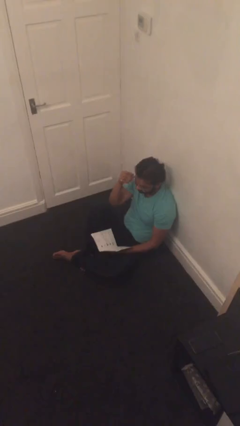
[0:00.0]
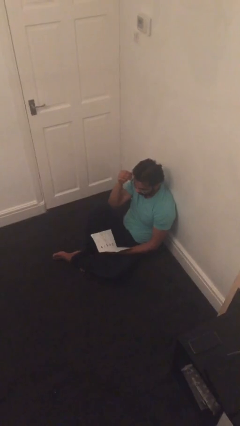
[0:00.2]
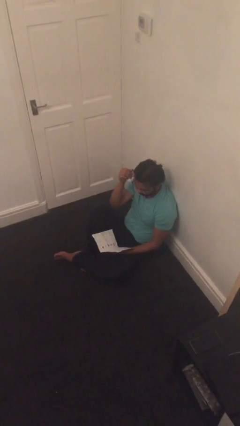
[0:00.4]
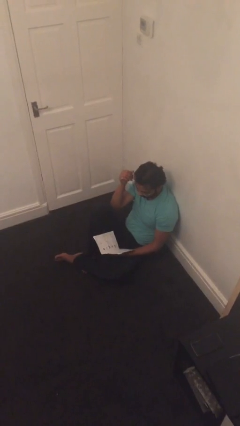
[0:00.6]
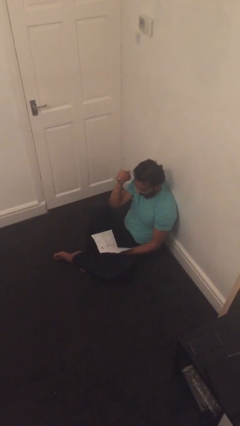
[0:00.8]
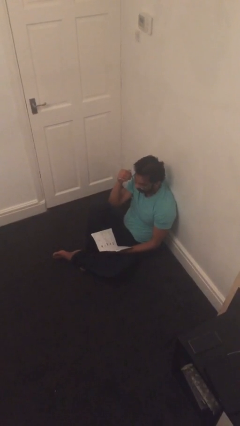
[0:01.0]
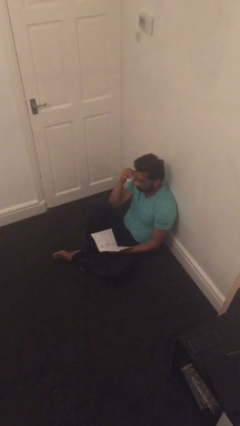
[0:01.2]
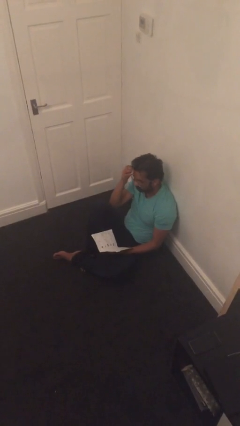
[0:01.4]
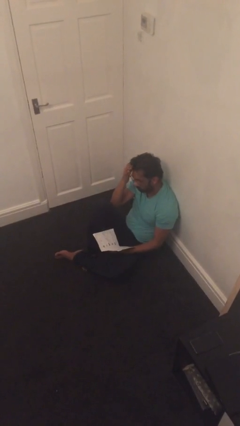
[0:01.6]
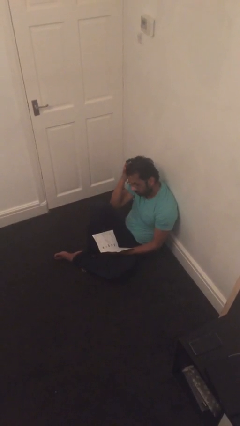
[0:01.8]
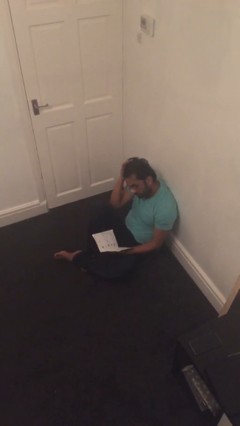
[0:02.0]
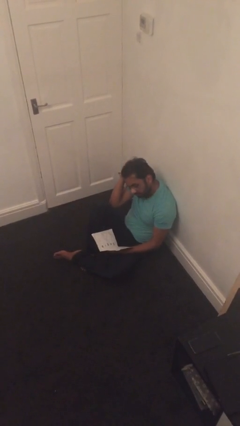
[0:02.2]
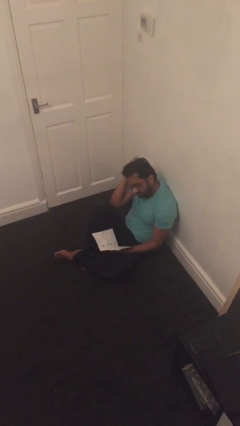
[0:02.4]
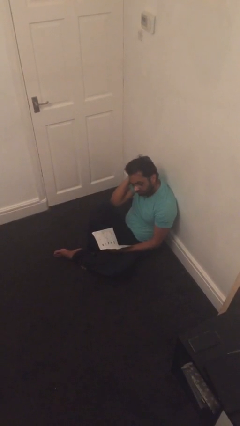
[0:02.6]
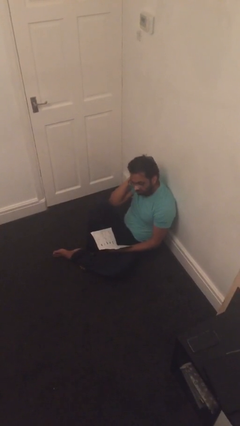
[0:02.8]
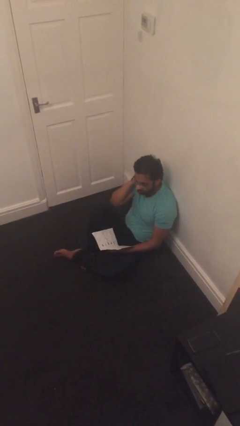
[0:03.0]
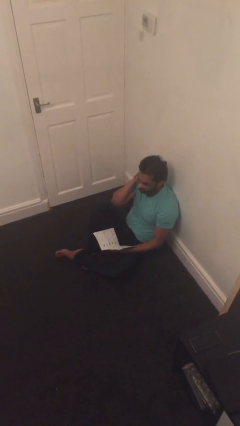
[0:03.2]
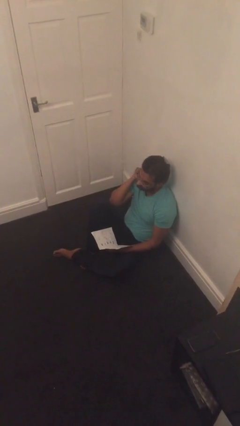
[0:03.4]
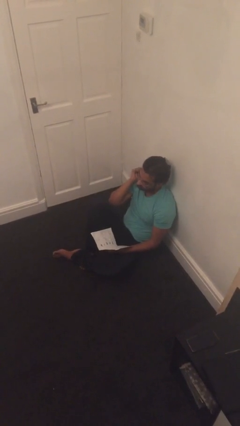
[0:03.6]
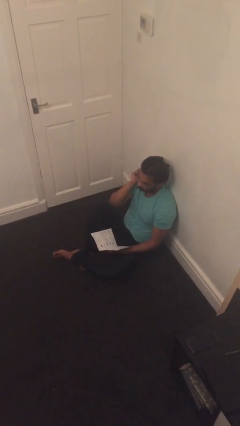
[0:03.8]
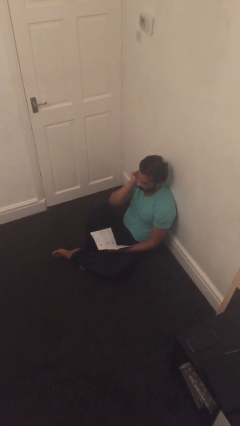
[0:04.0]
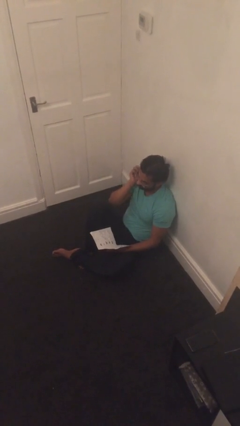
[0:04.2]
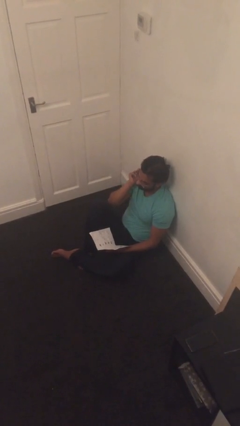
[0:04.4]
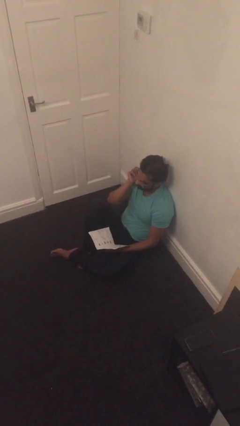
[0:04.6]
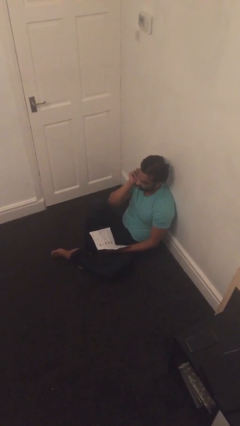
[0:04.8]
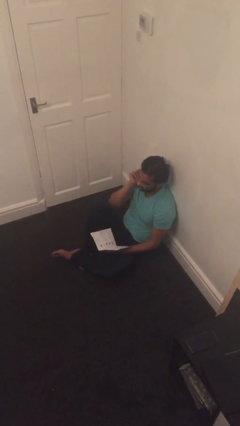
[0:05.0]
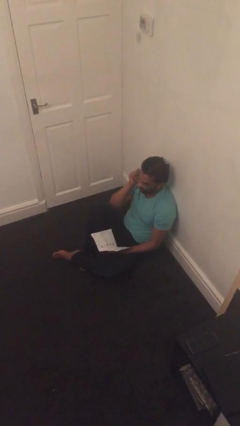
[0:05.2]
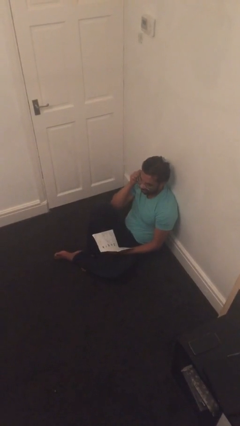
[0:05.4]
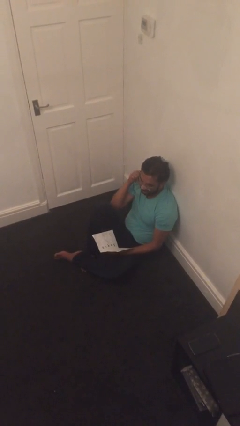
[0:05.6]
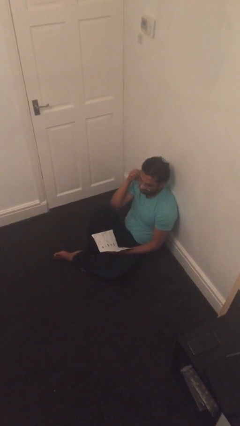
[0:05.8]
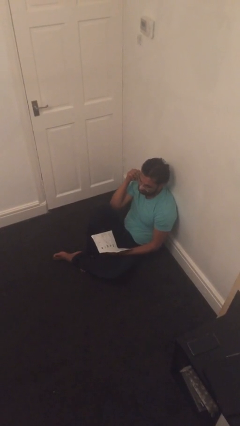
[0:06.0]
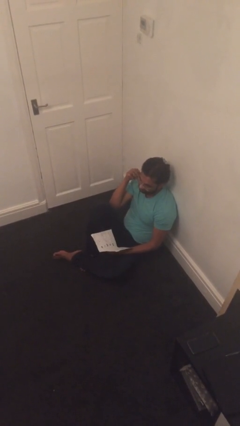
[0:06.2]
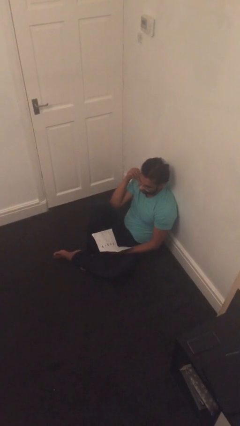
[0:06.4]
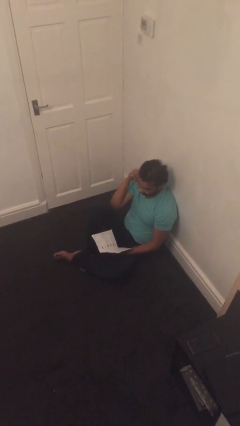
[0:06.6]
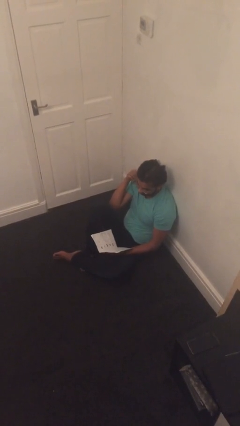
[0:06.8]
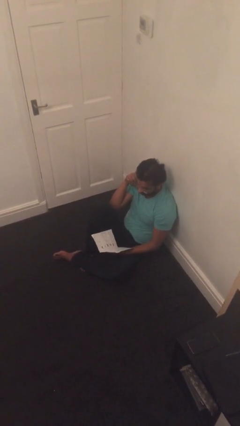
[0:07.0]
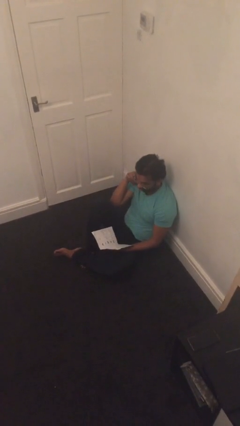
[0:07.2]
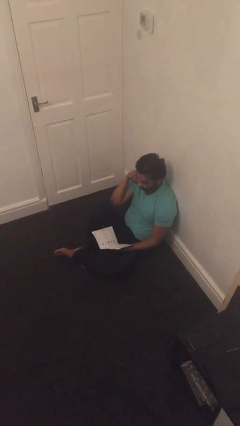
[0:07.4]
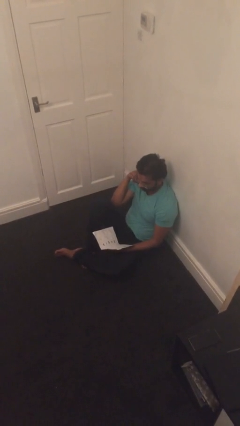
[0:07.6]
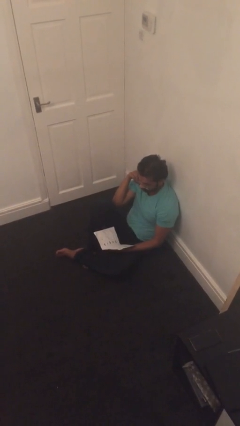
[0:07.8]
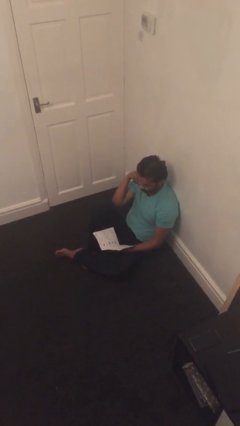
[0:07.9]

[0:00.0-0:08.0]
person reads document

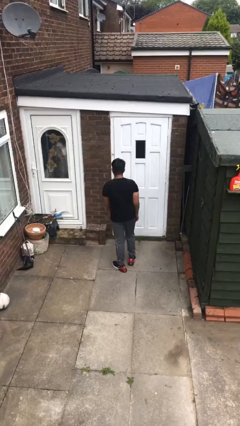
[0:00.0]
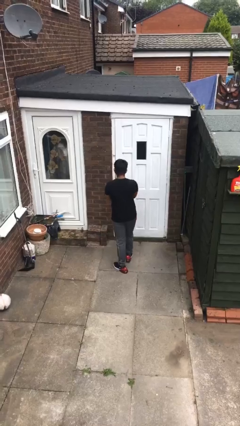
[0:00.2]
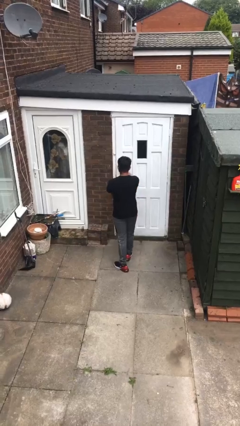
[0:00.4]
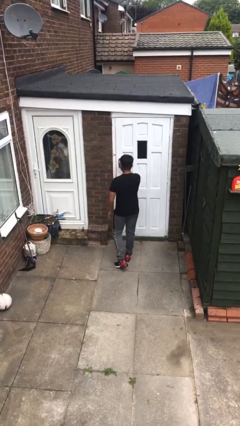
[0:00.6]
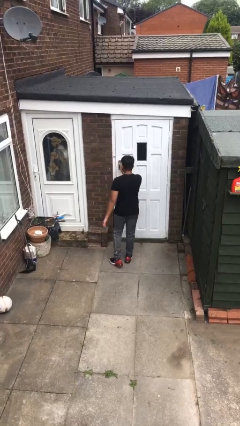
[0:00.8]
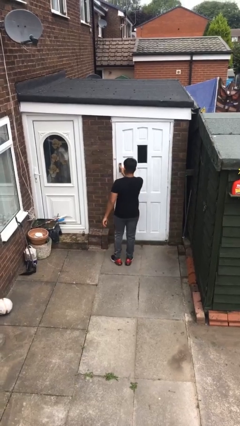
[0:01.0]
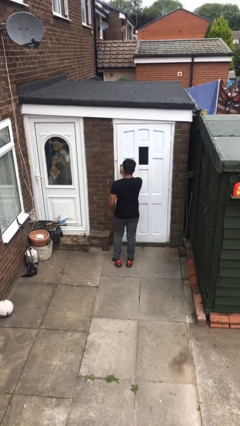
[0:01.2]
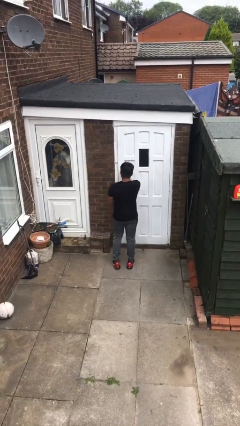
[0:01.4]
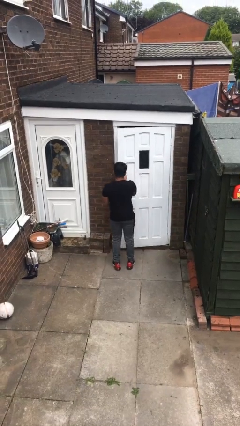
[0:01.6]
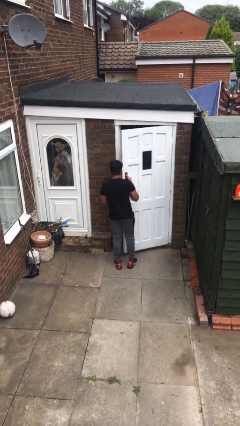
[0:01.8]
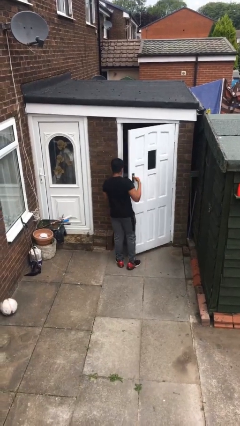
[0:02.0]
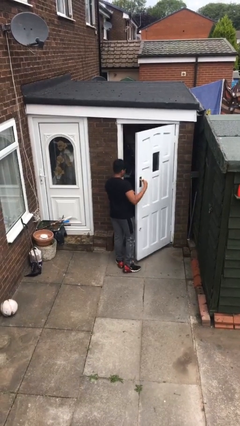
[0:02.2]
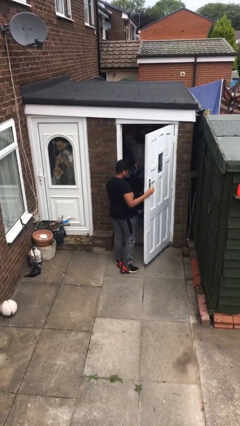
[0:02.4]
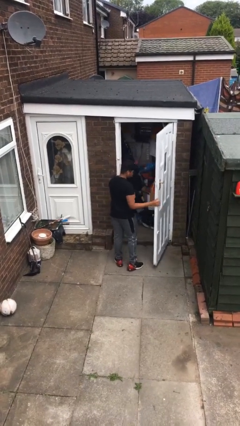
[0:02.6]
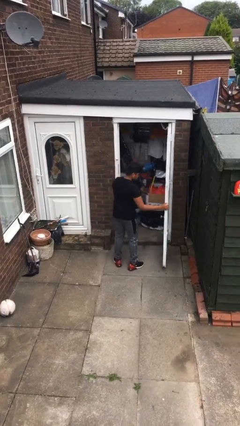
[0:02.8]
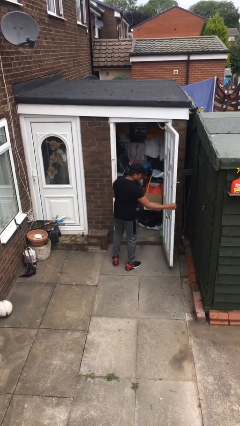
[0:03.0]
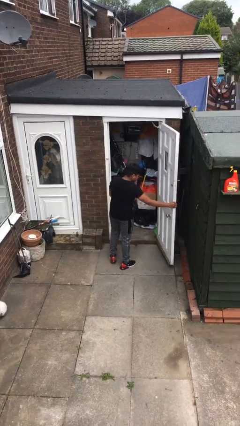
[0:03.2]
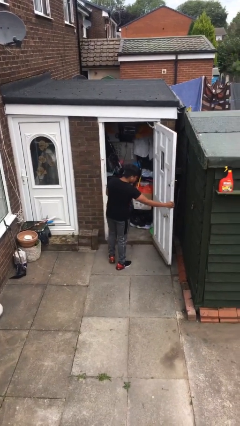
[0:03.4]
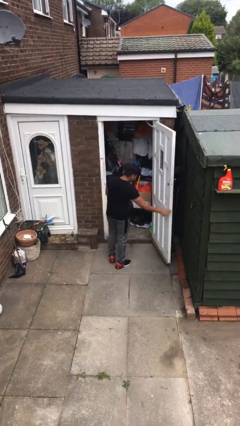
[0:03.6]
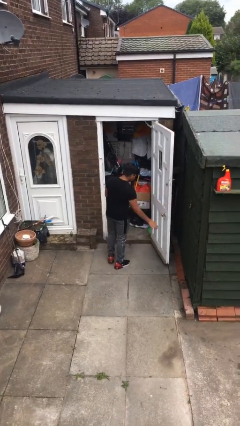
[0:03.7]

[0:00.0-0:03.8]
person opens facility door

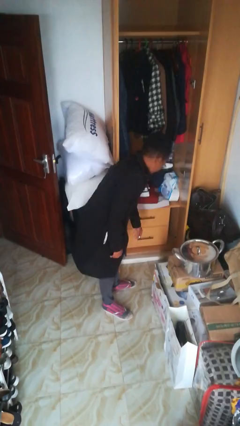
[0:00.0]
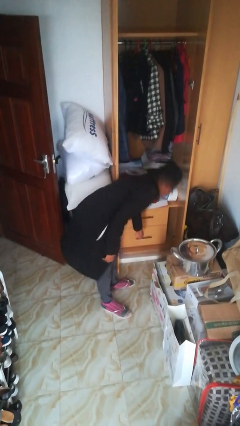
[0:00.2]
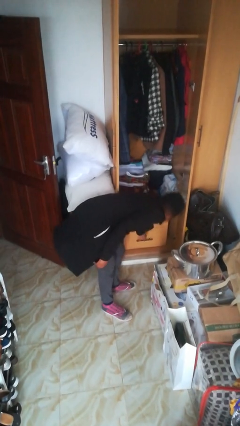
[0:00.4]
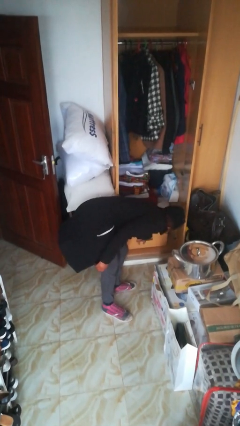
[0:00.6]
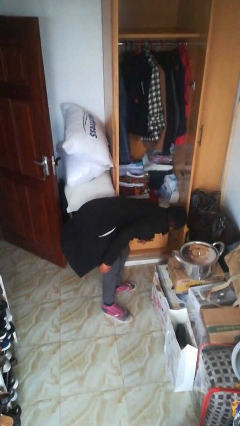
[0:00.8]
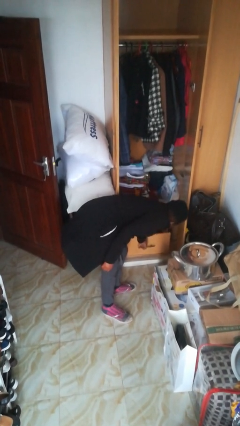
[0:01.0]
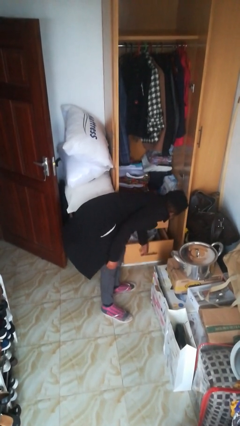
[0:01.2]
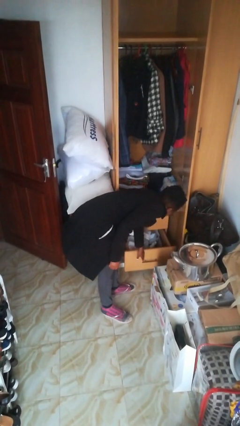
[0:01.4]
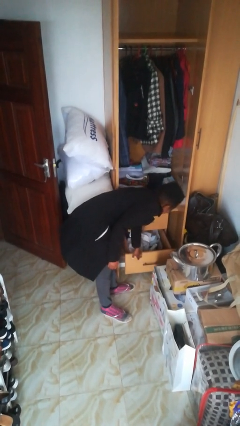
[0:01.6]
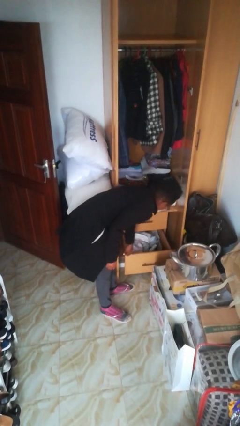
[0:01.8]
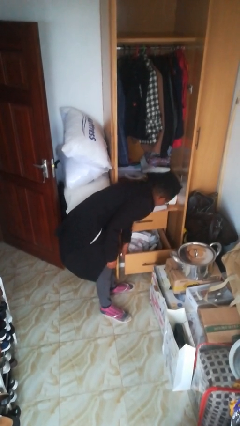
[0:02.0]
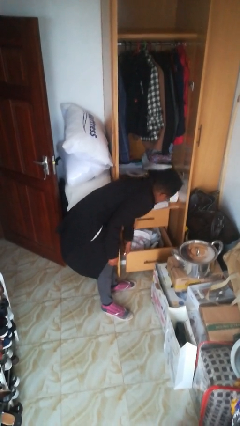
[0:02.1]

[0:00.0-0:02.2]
person opens dresser drawer

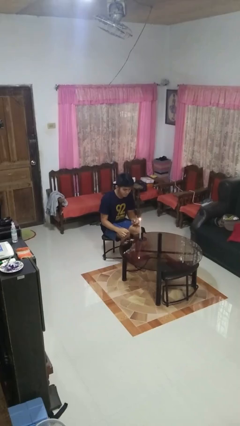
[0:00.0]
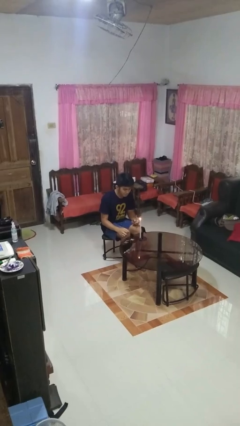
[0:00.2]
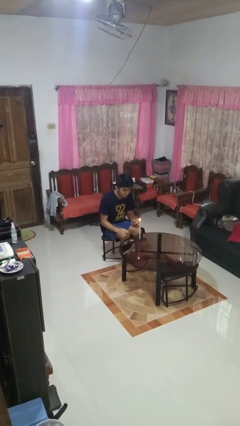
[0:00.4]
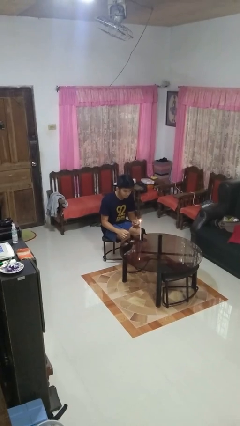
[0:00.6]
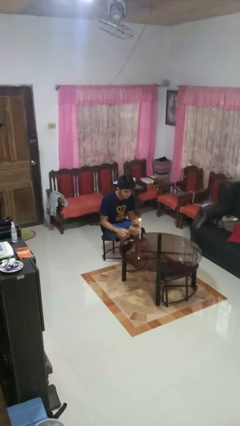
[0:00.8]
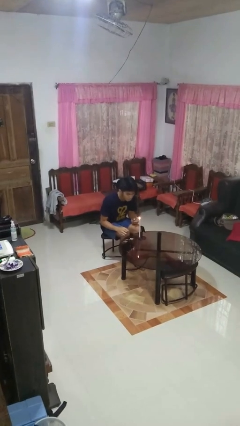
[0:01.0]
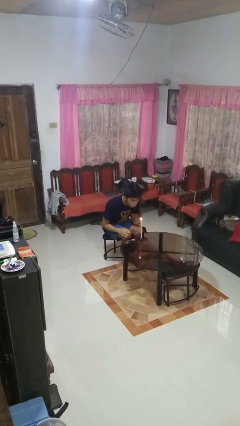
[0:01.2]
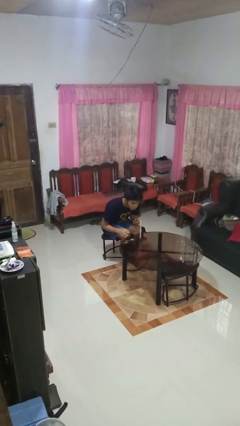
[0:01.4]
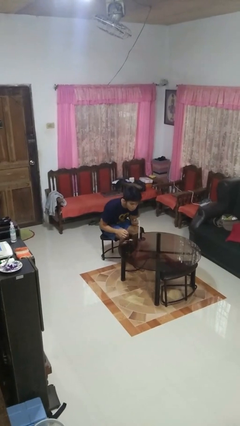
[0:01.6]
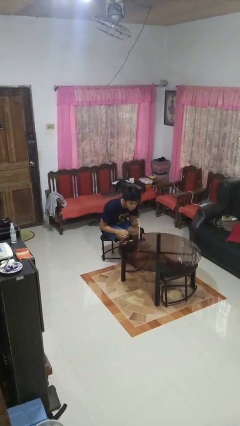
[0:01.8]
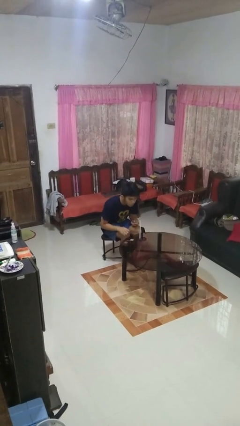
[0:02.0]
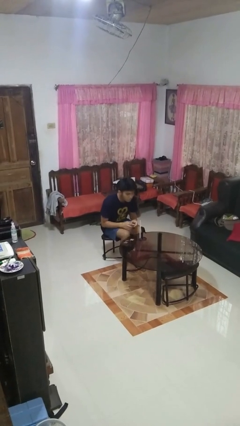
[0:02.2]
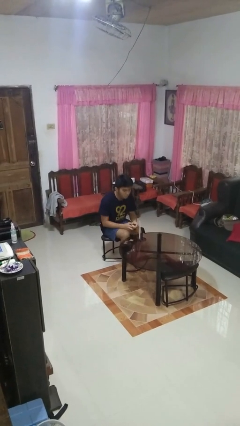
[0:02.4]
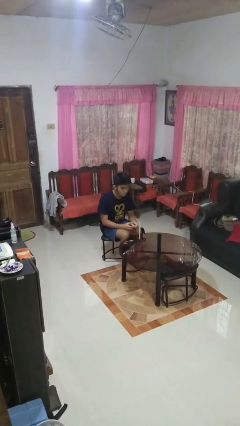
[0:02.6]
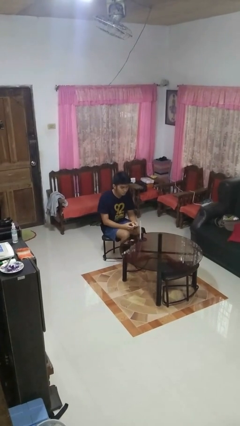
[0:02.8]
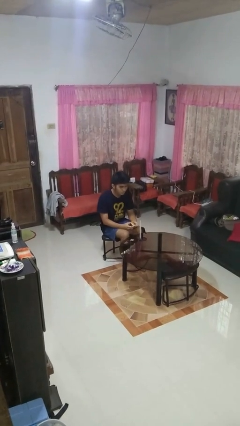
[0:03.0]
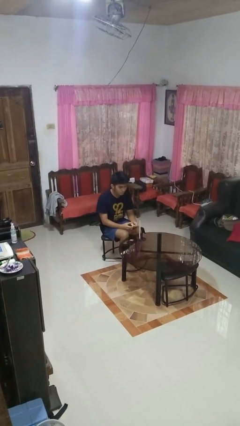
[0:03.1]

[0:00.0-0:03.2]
person extinguishes candle

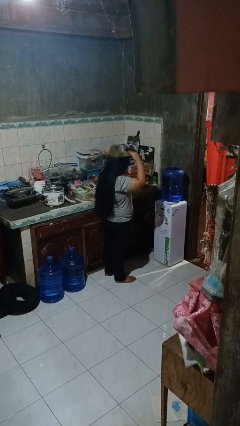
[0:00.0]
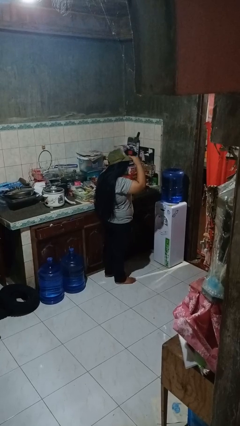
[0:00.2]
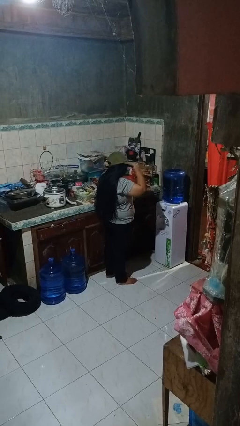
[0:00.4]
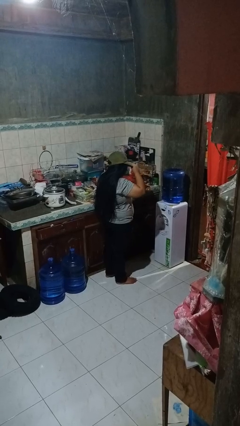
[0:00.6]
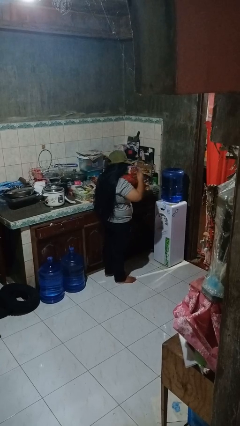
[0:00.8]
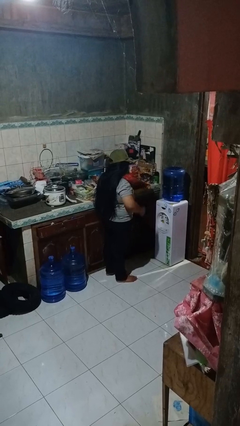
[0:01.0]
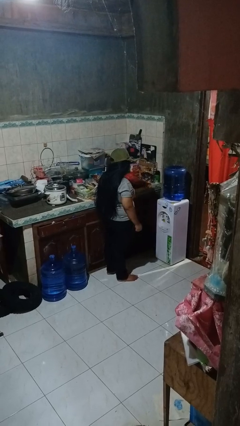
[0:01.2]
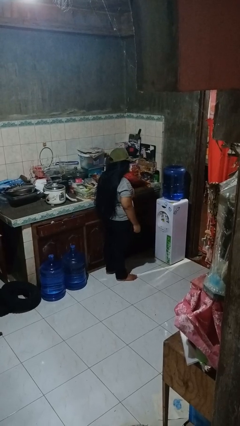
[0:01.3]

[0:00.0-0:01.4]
person puts on hat
